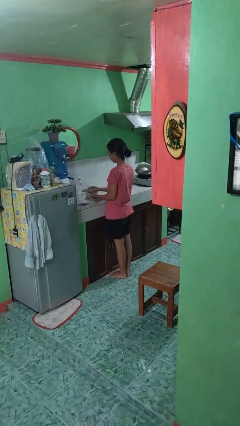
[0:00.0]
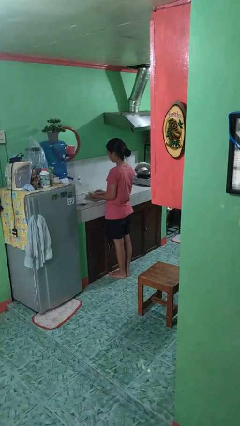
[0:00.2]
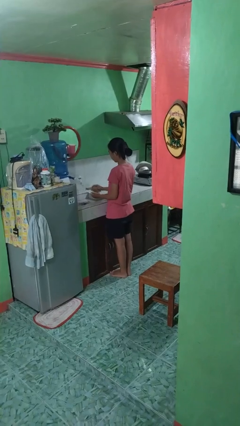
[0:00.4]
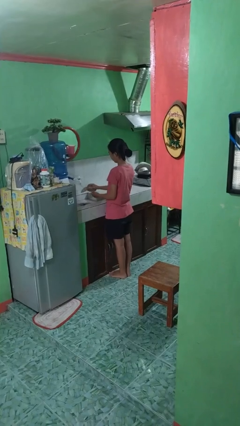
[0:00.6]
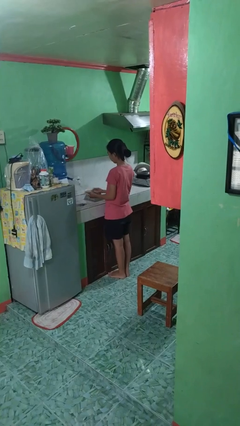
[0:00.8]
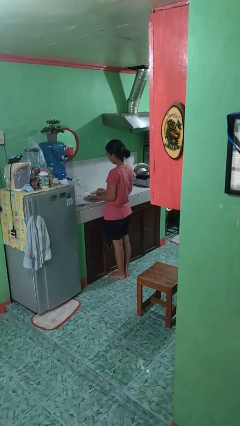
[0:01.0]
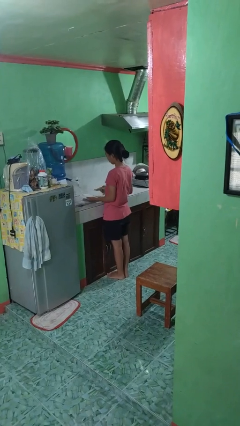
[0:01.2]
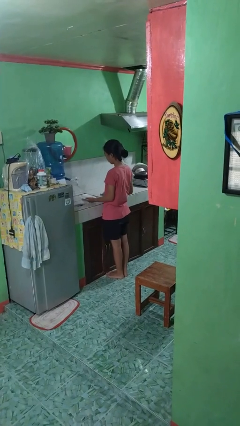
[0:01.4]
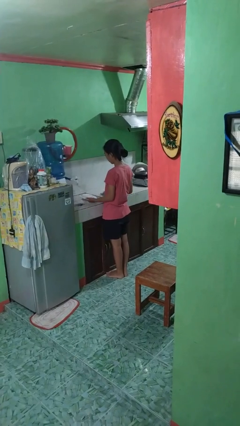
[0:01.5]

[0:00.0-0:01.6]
person dries dish

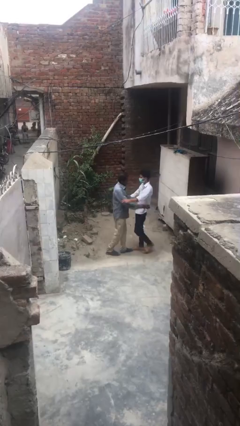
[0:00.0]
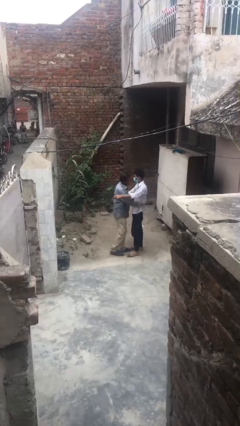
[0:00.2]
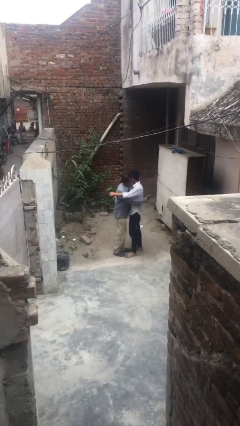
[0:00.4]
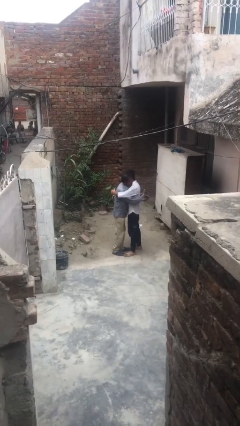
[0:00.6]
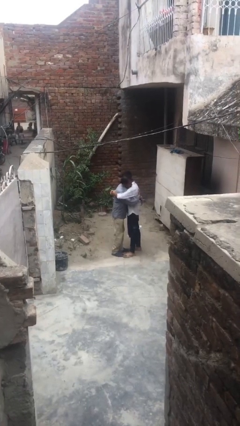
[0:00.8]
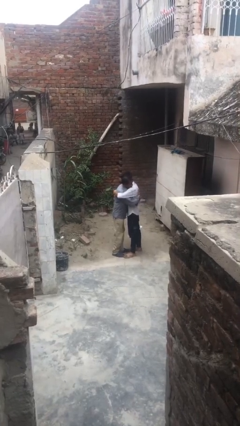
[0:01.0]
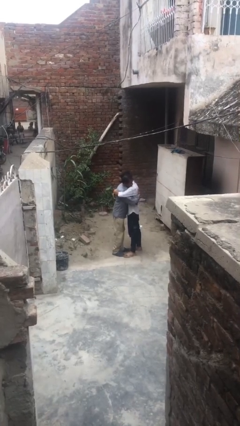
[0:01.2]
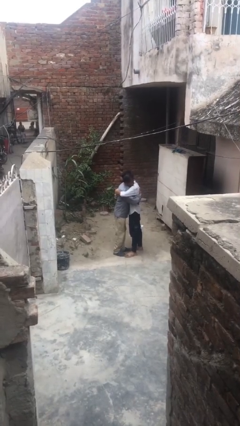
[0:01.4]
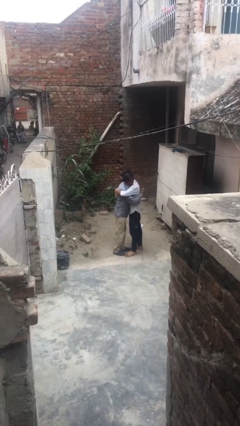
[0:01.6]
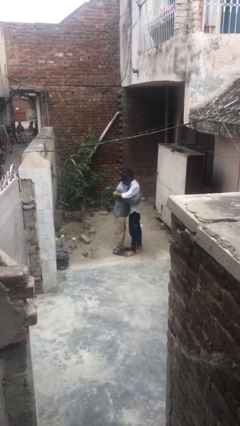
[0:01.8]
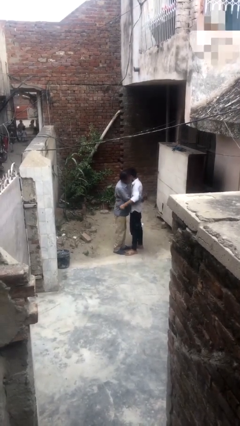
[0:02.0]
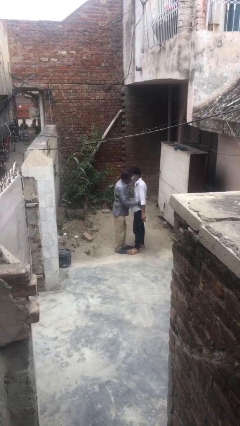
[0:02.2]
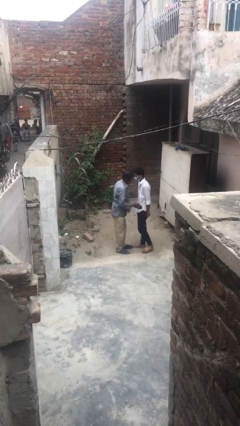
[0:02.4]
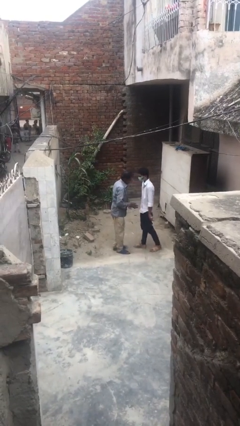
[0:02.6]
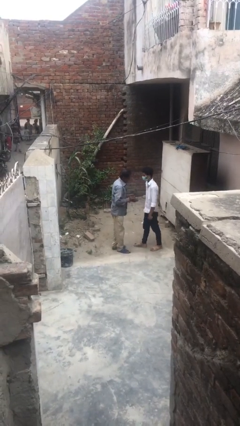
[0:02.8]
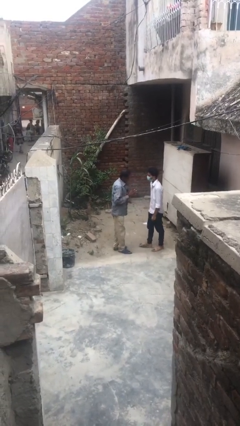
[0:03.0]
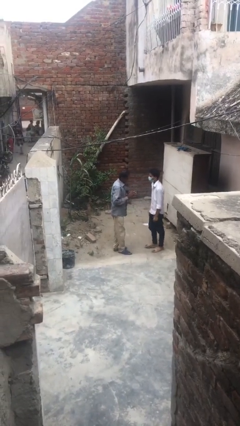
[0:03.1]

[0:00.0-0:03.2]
person embraces person

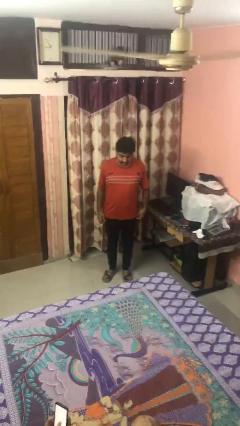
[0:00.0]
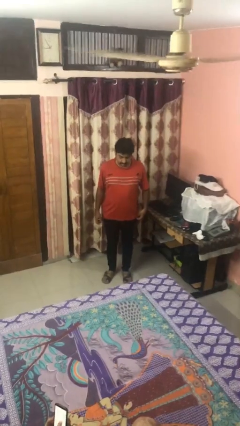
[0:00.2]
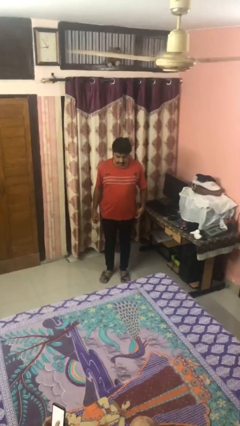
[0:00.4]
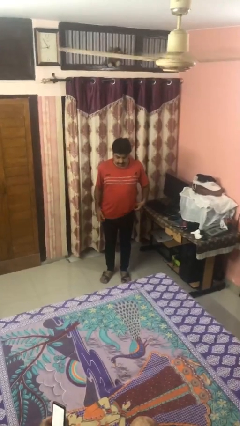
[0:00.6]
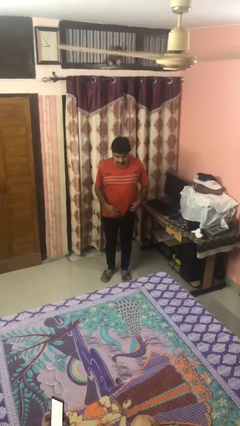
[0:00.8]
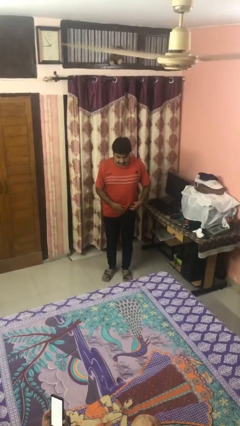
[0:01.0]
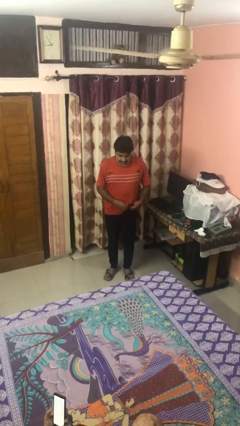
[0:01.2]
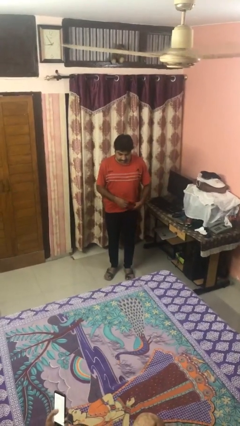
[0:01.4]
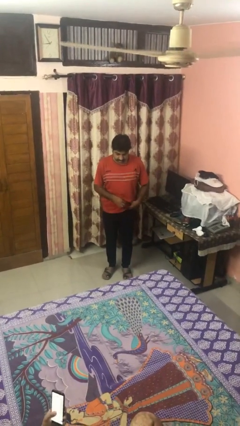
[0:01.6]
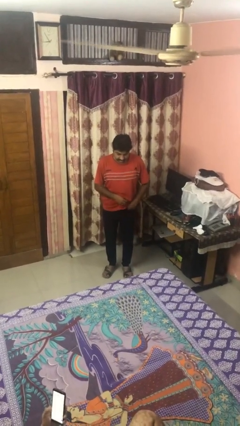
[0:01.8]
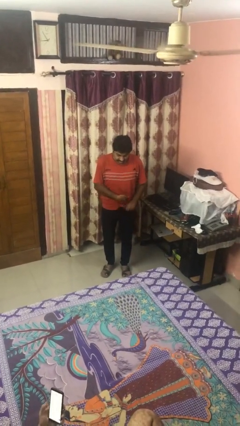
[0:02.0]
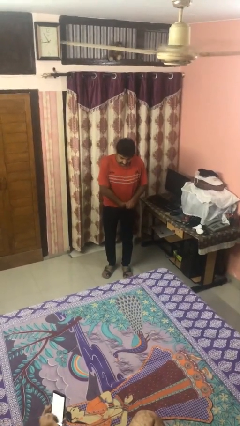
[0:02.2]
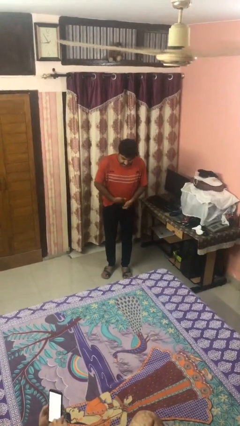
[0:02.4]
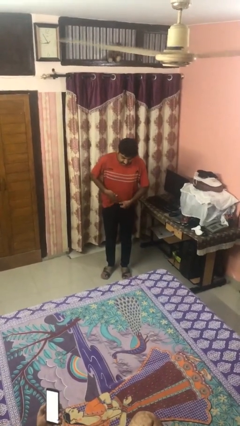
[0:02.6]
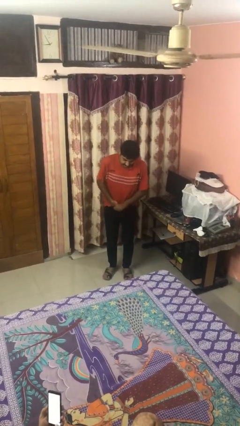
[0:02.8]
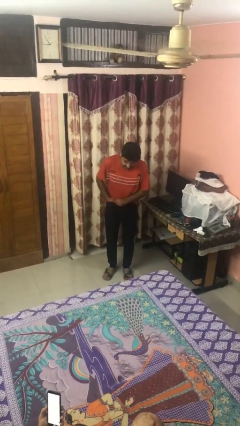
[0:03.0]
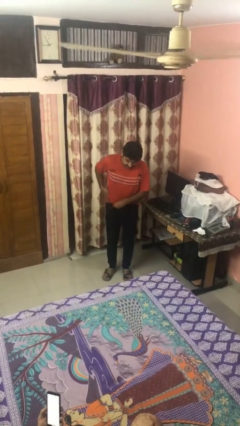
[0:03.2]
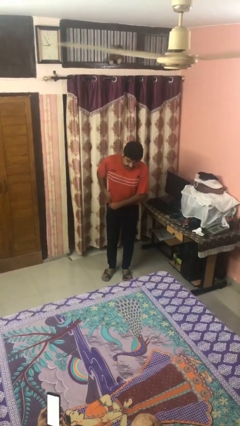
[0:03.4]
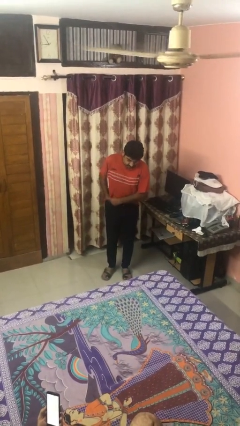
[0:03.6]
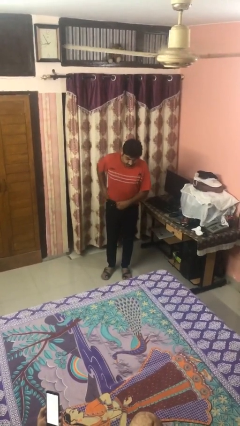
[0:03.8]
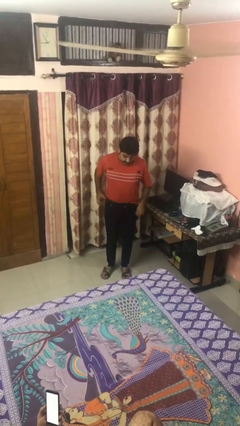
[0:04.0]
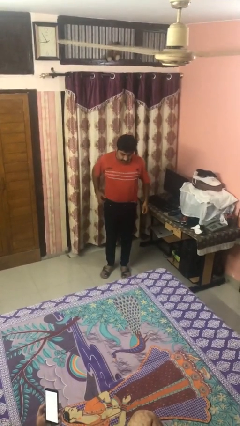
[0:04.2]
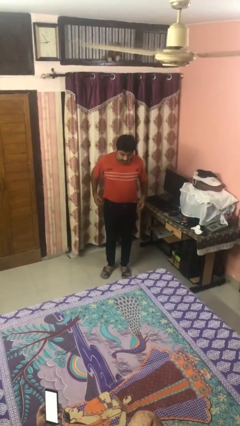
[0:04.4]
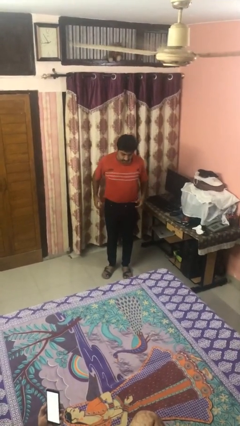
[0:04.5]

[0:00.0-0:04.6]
person tucks in shirt

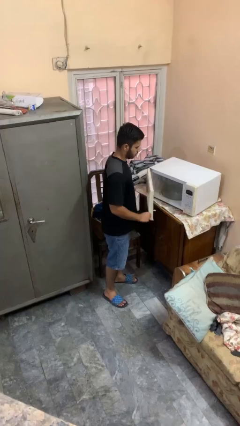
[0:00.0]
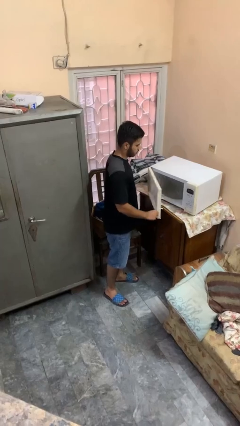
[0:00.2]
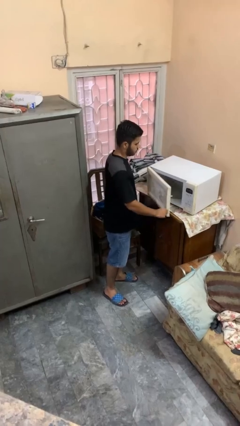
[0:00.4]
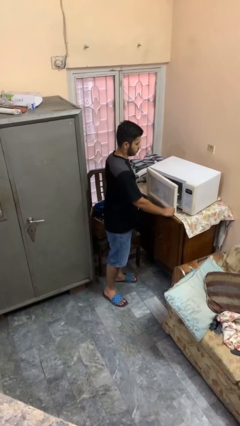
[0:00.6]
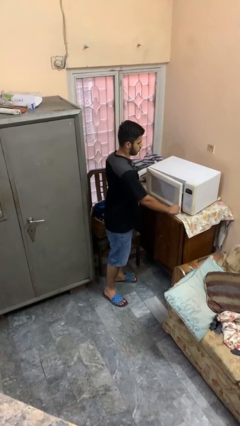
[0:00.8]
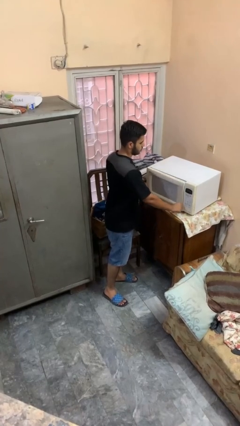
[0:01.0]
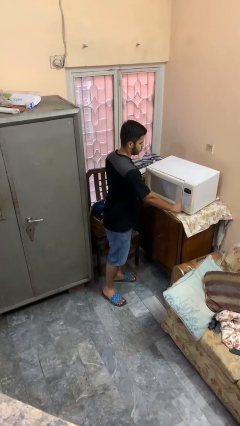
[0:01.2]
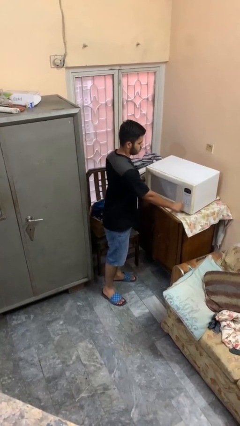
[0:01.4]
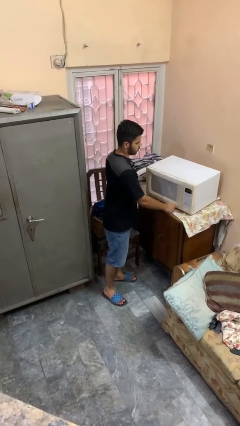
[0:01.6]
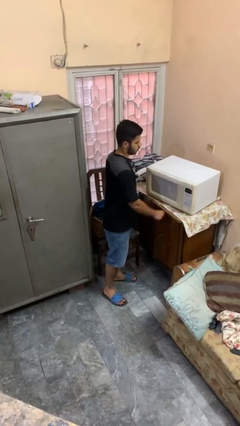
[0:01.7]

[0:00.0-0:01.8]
person closes microwave

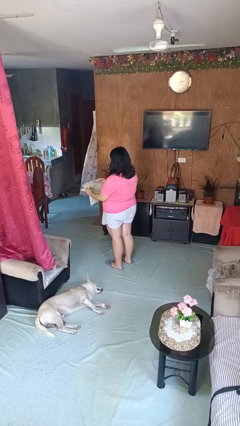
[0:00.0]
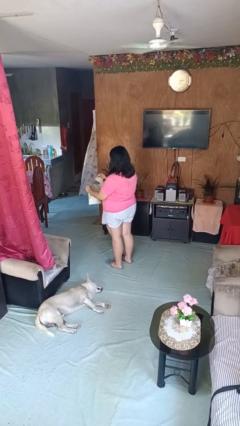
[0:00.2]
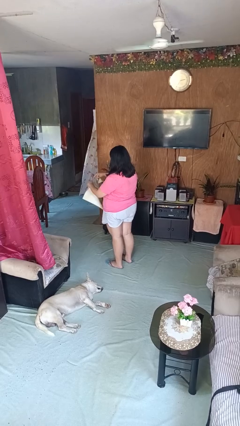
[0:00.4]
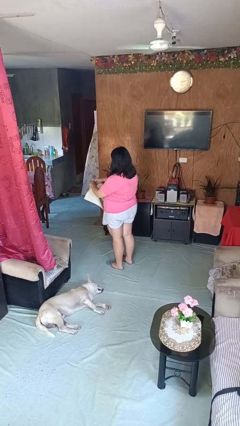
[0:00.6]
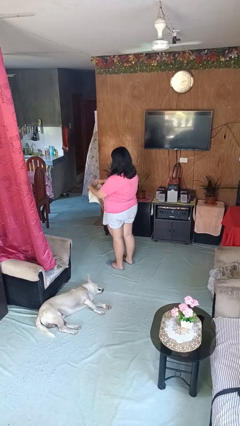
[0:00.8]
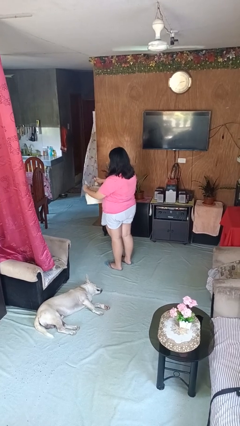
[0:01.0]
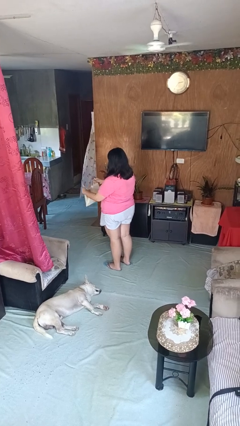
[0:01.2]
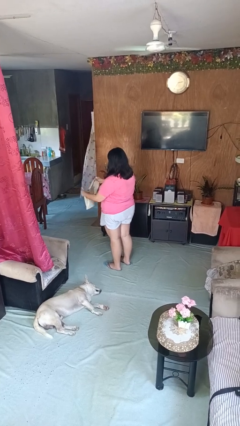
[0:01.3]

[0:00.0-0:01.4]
person tears paper

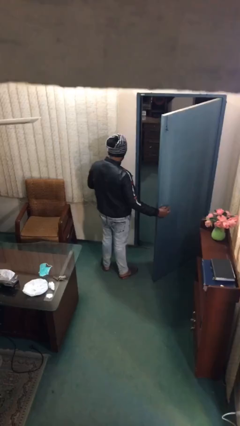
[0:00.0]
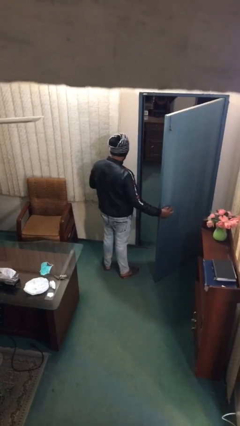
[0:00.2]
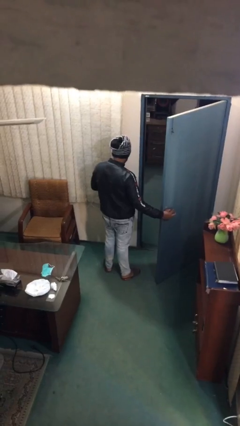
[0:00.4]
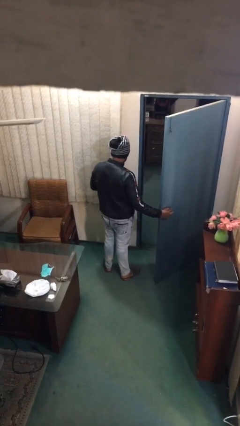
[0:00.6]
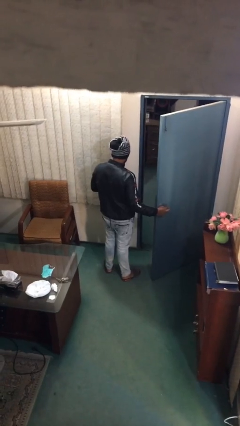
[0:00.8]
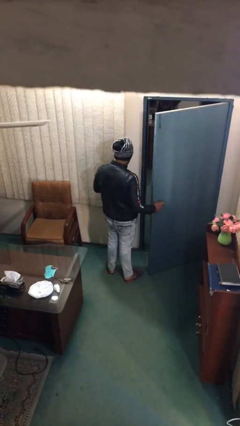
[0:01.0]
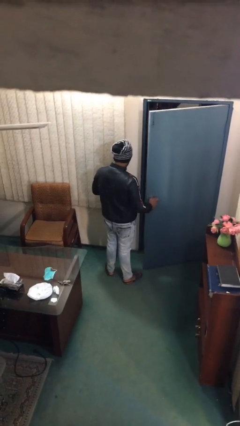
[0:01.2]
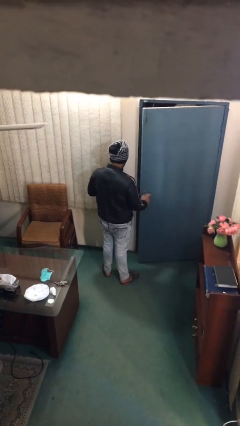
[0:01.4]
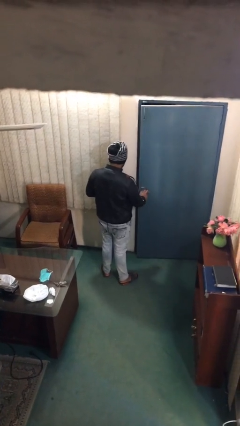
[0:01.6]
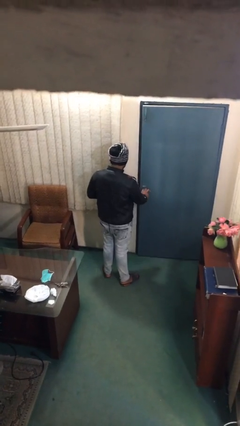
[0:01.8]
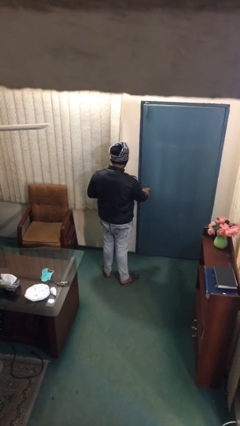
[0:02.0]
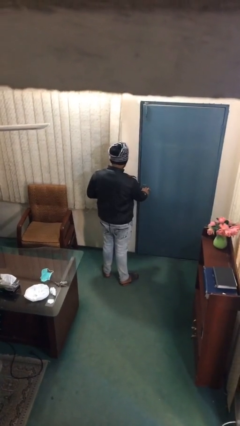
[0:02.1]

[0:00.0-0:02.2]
person closes facility door

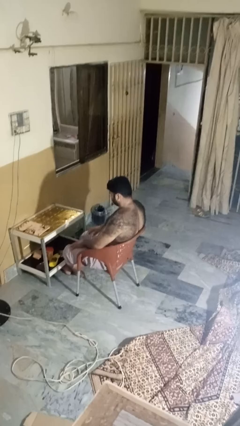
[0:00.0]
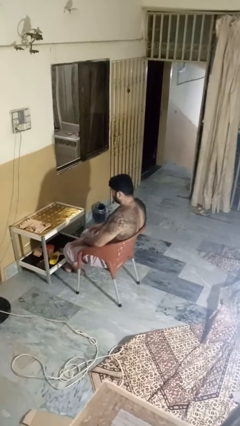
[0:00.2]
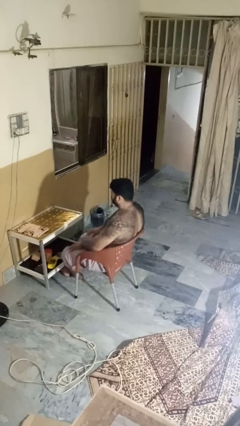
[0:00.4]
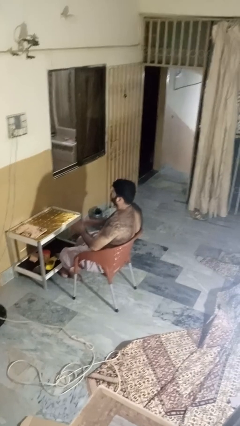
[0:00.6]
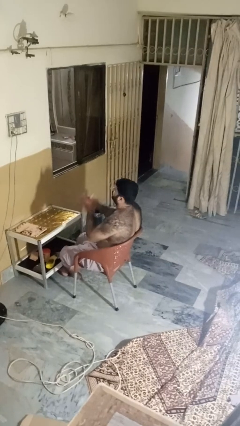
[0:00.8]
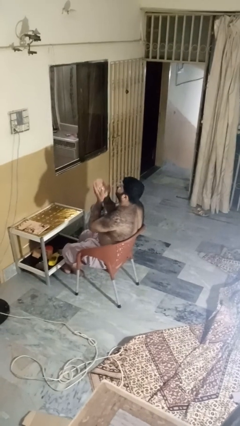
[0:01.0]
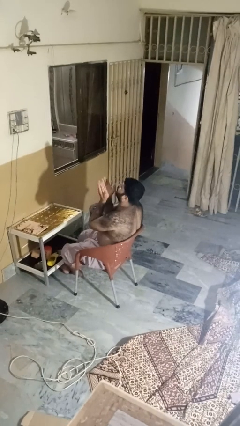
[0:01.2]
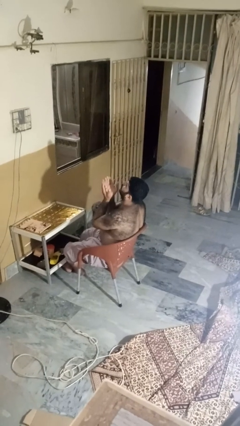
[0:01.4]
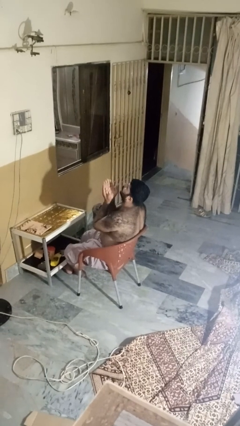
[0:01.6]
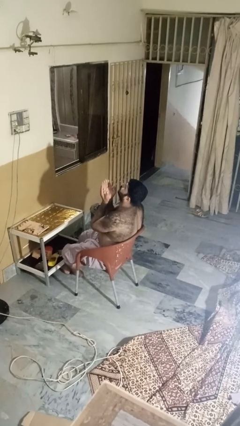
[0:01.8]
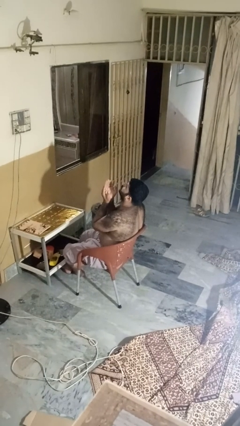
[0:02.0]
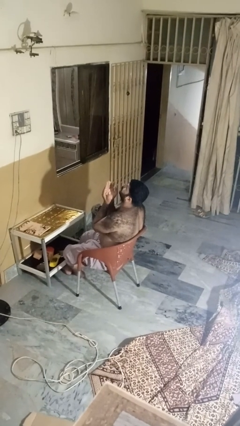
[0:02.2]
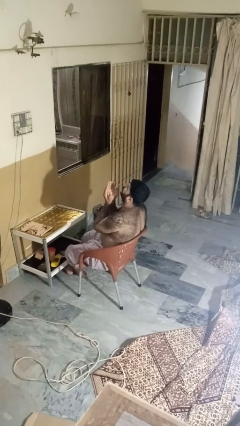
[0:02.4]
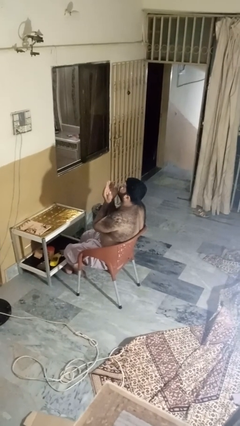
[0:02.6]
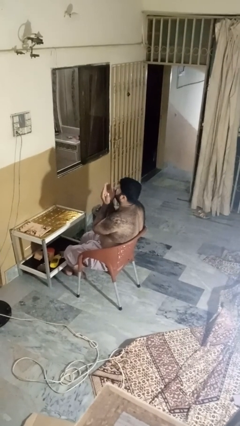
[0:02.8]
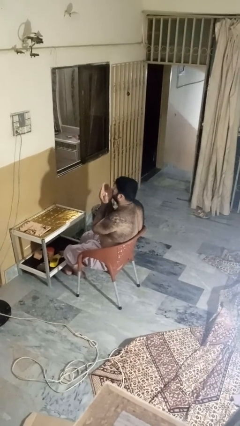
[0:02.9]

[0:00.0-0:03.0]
person prays
